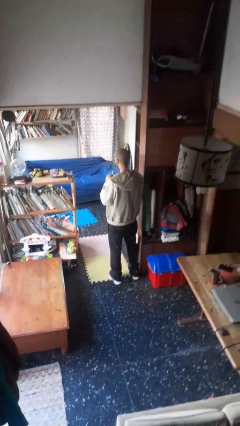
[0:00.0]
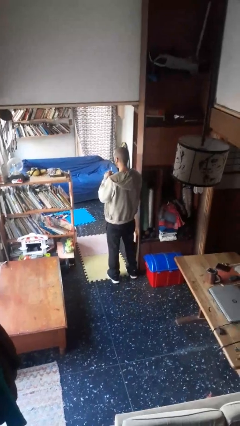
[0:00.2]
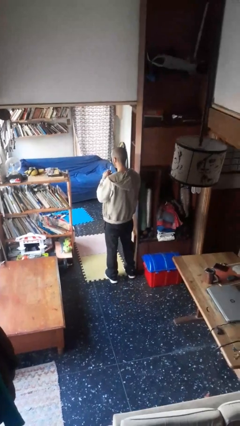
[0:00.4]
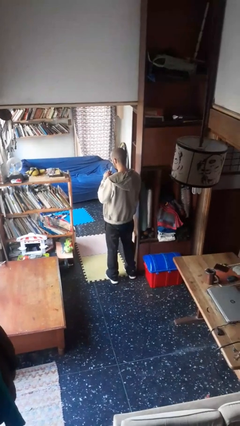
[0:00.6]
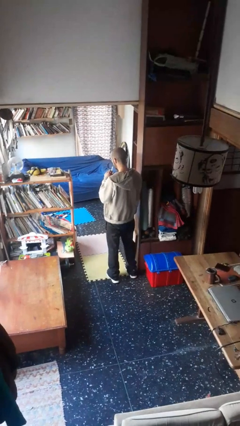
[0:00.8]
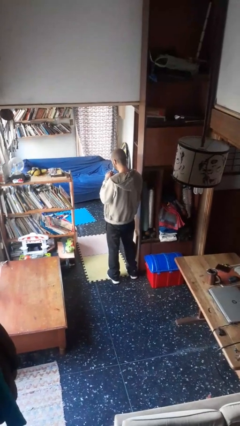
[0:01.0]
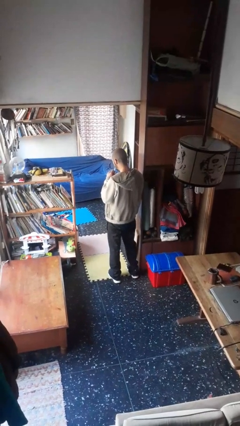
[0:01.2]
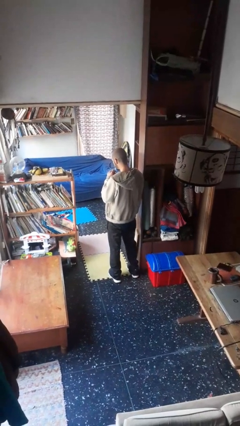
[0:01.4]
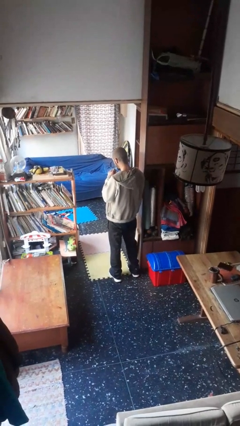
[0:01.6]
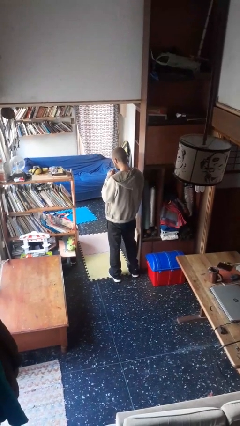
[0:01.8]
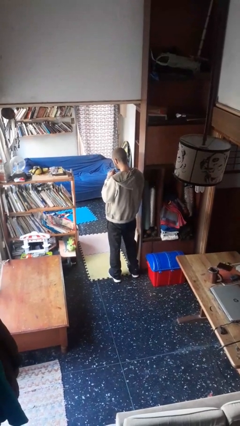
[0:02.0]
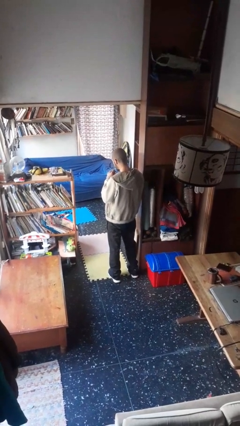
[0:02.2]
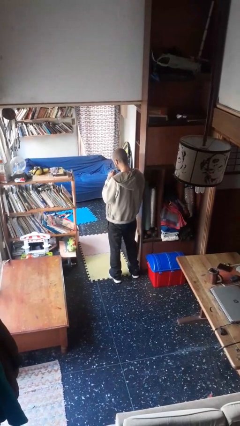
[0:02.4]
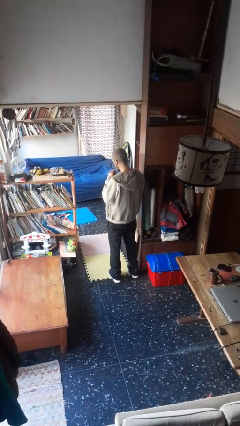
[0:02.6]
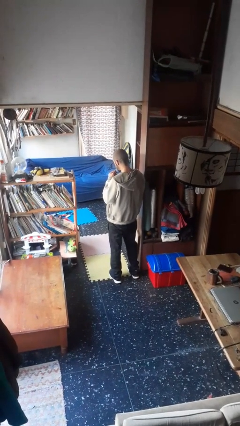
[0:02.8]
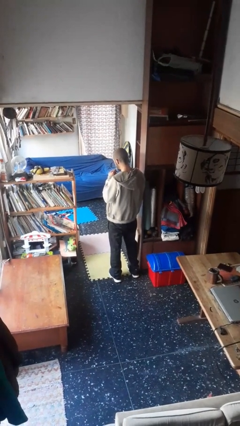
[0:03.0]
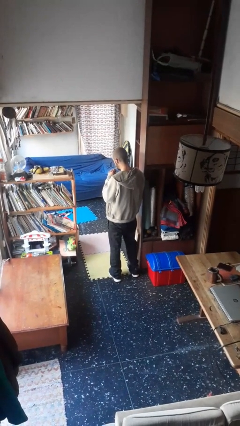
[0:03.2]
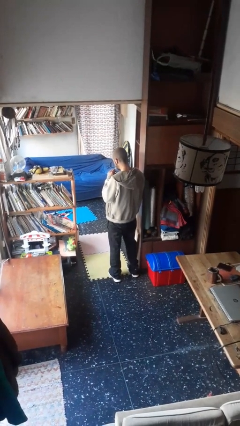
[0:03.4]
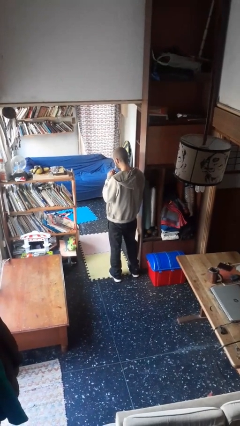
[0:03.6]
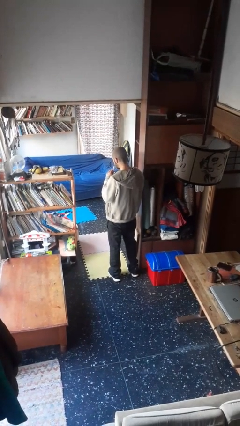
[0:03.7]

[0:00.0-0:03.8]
person drinks from straw

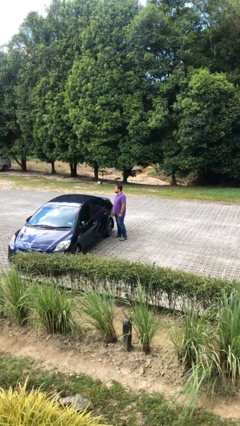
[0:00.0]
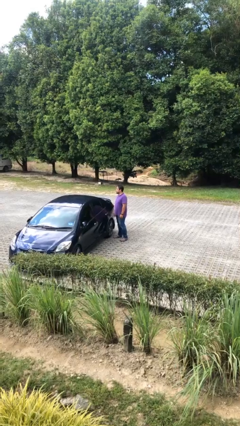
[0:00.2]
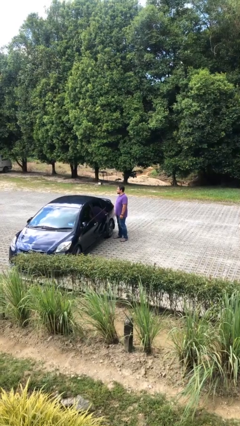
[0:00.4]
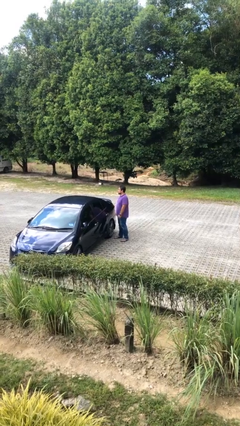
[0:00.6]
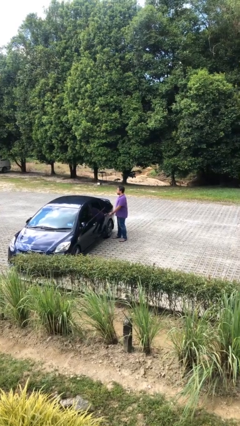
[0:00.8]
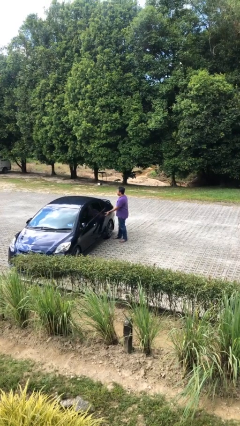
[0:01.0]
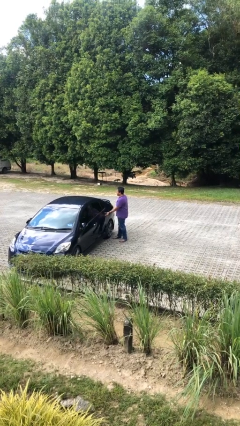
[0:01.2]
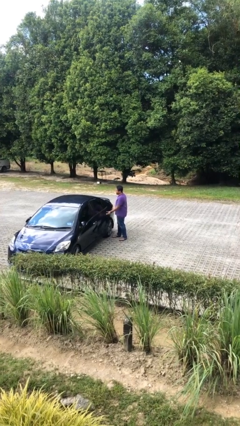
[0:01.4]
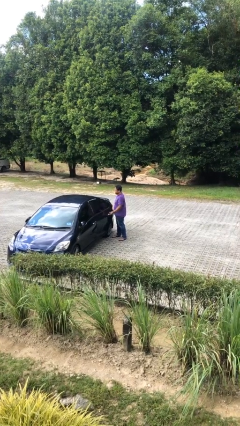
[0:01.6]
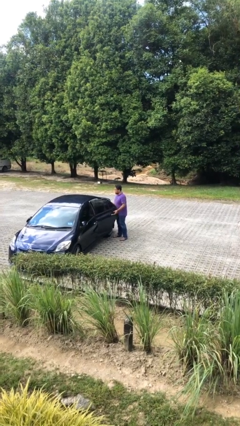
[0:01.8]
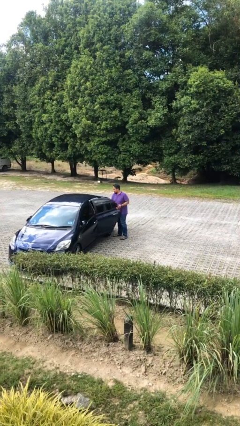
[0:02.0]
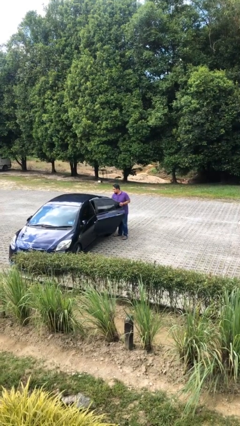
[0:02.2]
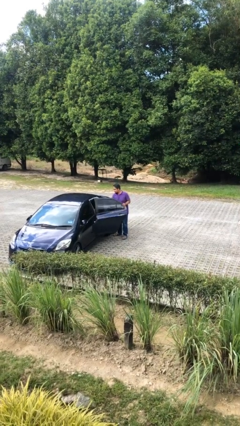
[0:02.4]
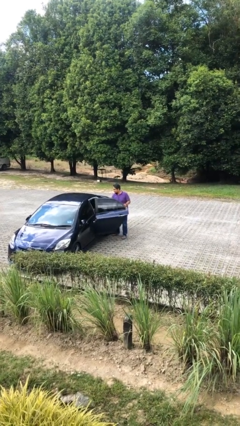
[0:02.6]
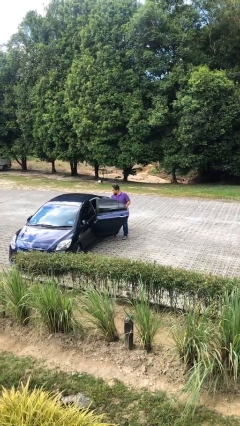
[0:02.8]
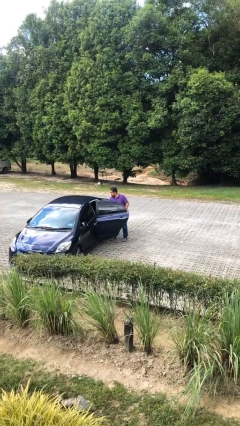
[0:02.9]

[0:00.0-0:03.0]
person opens car door

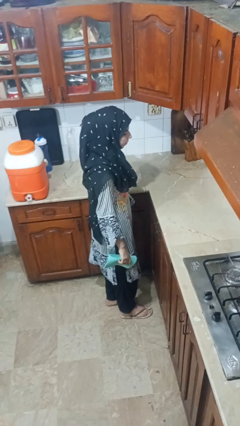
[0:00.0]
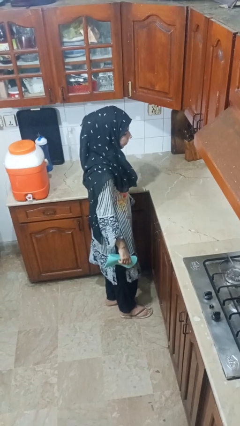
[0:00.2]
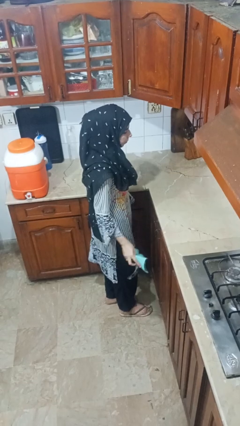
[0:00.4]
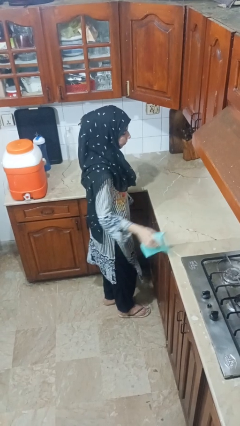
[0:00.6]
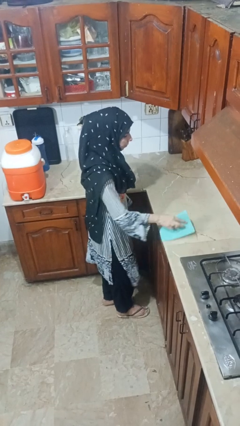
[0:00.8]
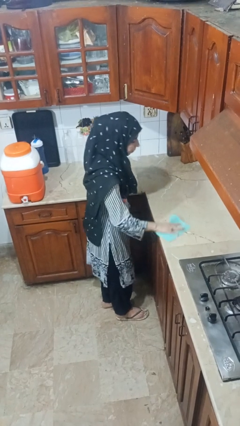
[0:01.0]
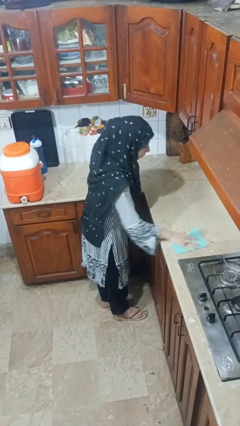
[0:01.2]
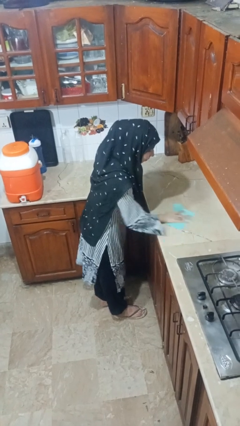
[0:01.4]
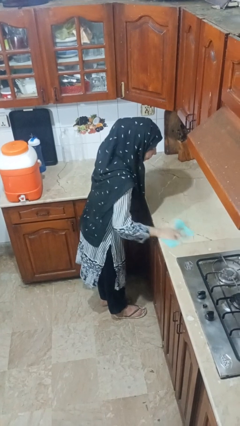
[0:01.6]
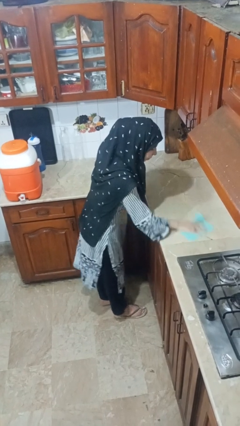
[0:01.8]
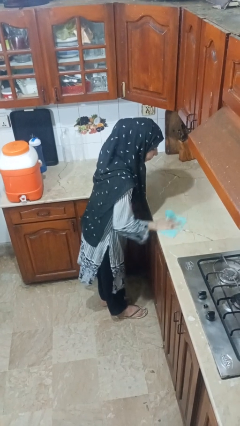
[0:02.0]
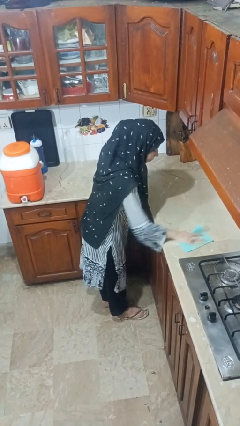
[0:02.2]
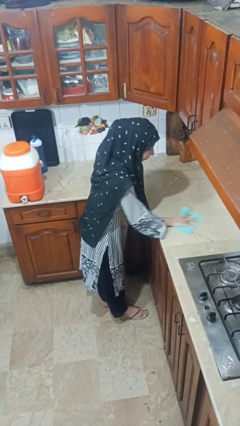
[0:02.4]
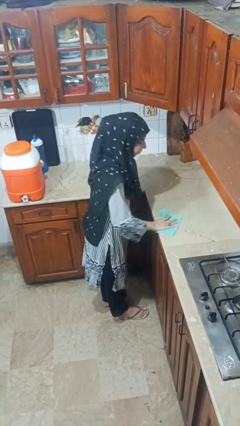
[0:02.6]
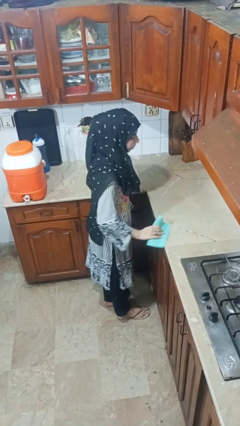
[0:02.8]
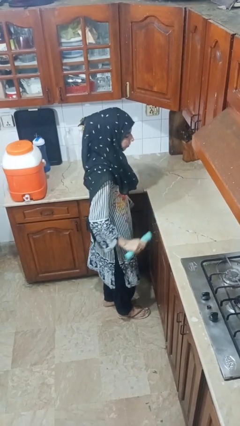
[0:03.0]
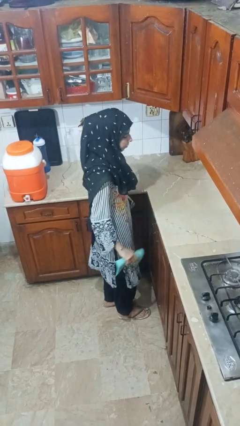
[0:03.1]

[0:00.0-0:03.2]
person cleans table with rag

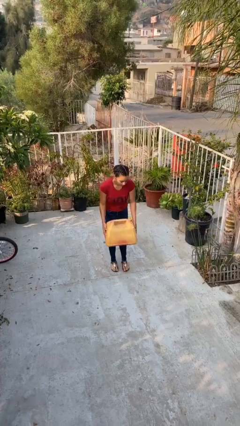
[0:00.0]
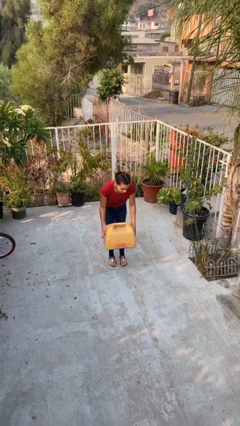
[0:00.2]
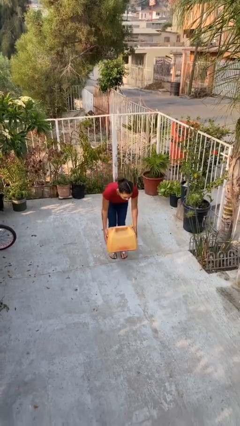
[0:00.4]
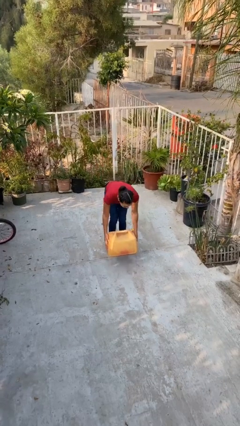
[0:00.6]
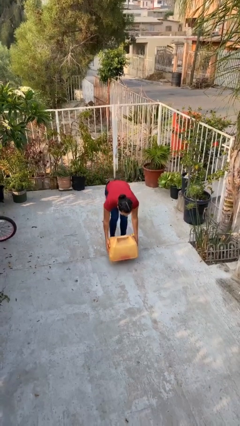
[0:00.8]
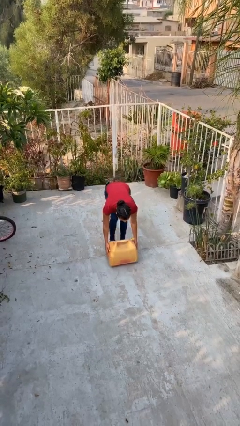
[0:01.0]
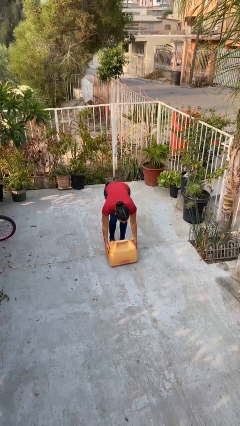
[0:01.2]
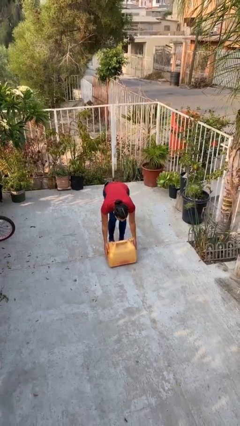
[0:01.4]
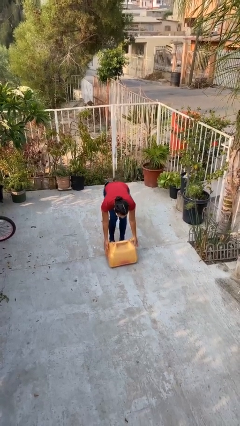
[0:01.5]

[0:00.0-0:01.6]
person puts down object on floor

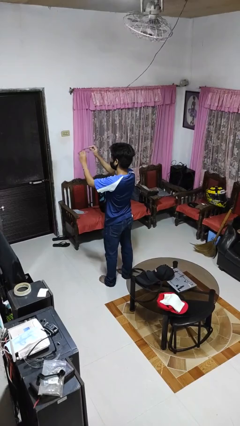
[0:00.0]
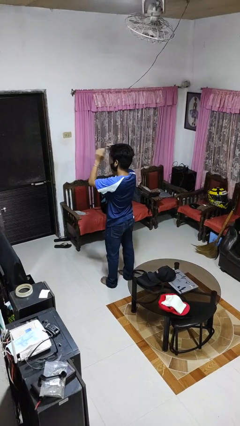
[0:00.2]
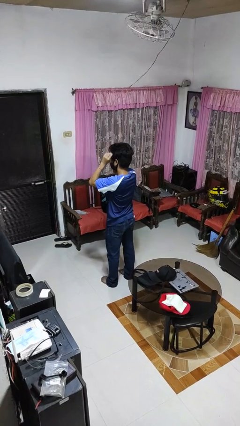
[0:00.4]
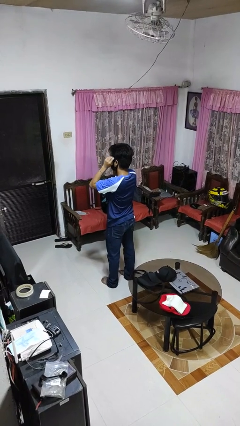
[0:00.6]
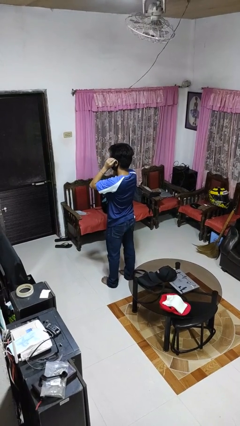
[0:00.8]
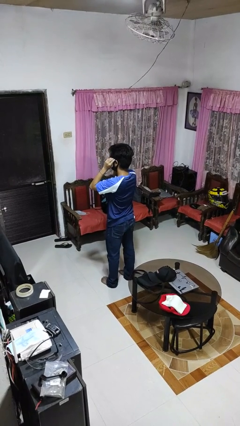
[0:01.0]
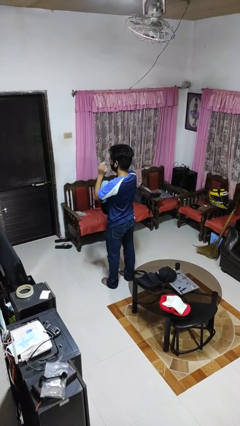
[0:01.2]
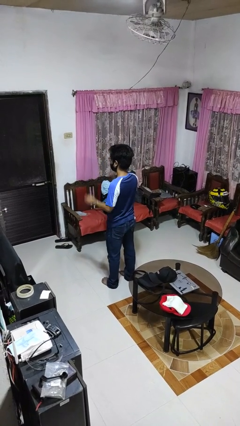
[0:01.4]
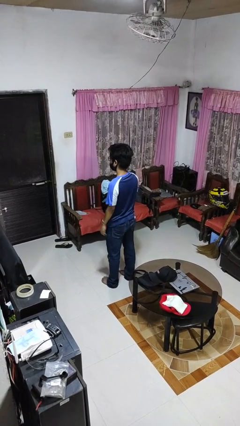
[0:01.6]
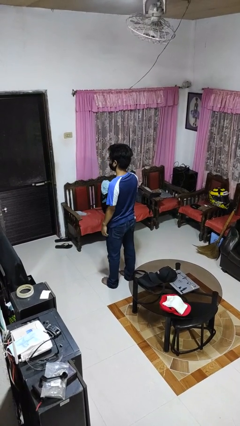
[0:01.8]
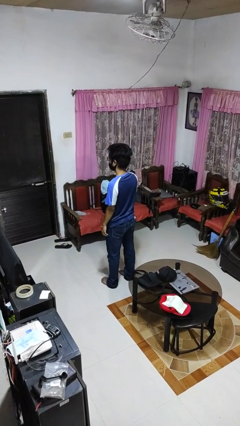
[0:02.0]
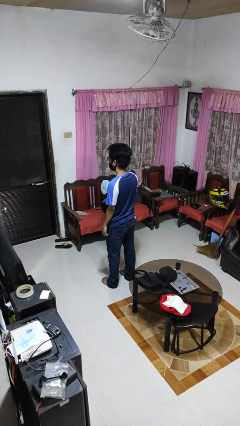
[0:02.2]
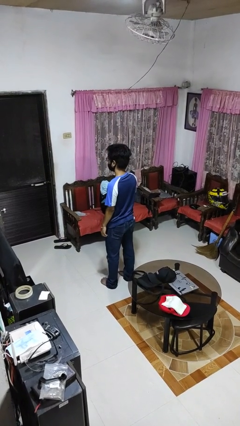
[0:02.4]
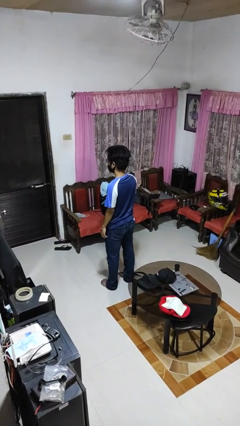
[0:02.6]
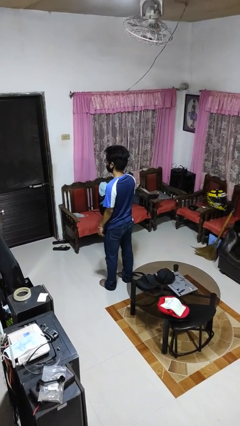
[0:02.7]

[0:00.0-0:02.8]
person puts on glasses

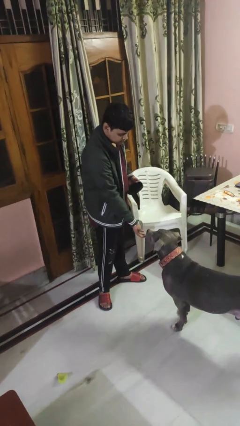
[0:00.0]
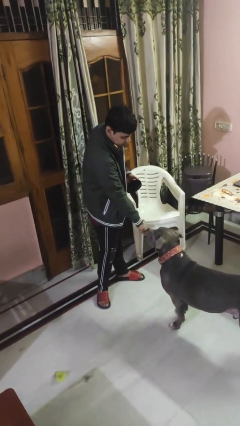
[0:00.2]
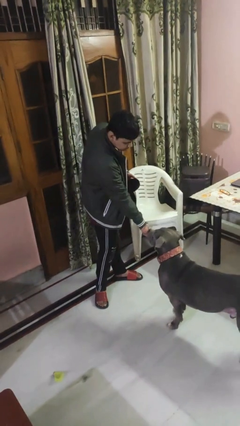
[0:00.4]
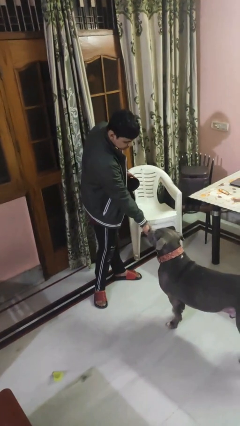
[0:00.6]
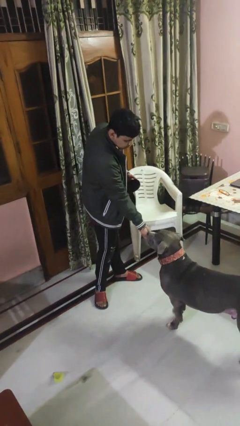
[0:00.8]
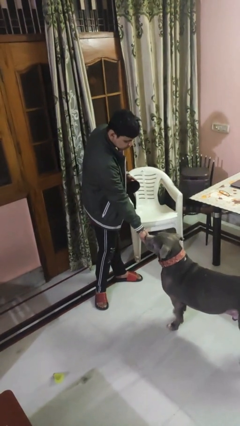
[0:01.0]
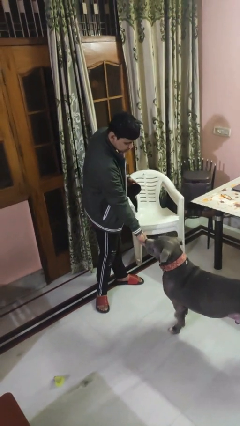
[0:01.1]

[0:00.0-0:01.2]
person feeds dog

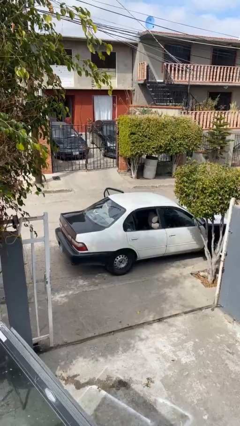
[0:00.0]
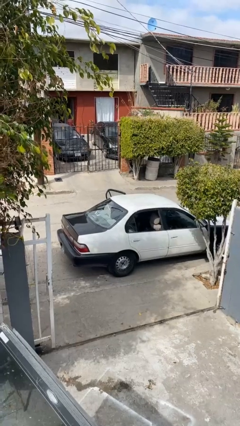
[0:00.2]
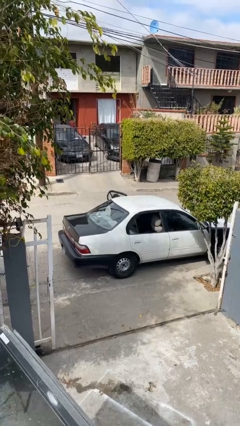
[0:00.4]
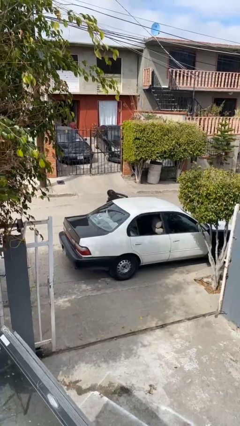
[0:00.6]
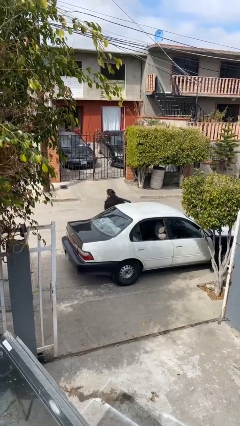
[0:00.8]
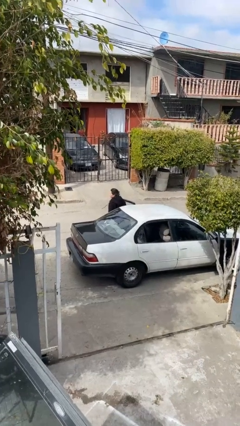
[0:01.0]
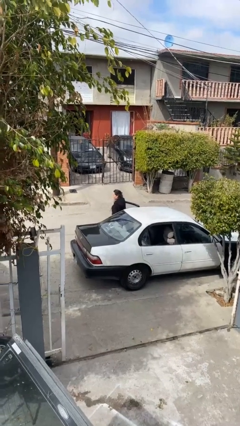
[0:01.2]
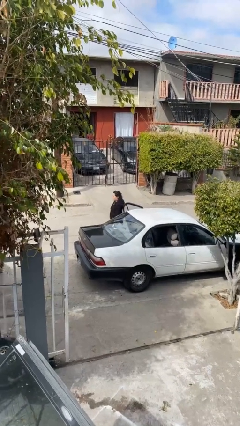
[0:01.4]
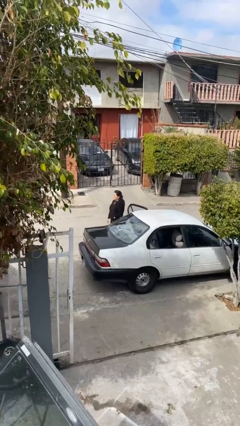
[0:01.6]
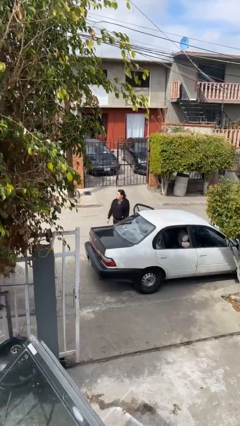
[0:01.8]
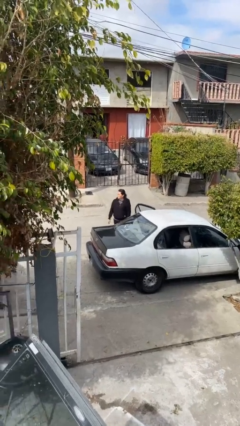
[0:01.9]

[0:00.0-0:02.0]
person exits car
